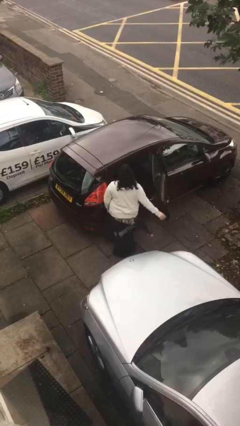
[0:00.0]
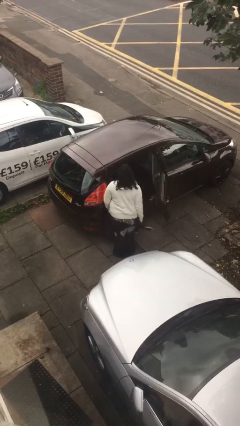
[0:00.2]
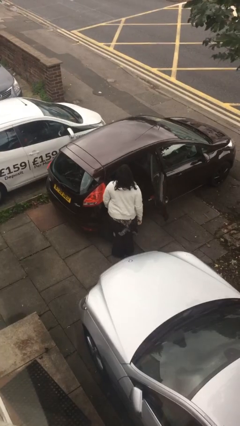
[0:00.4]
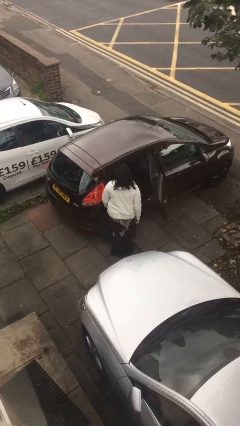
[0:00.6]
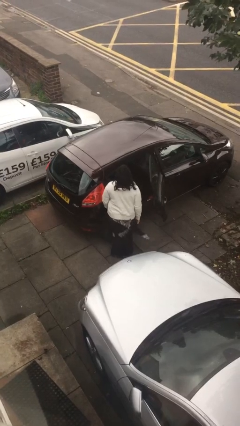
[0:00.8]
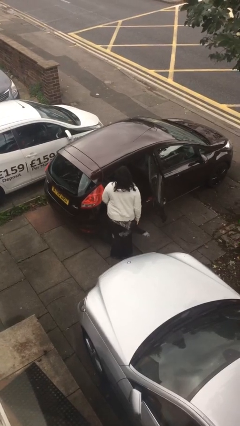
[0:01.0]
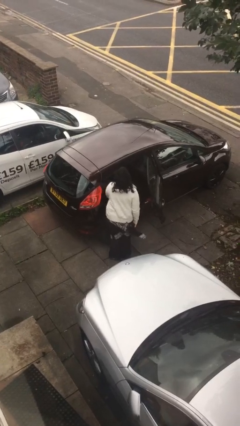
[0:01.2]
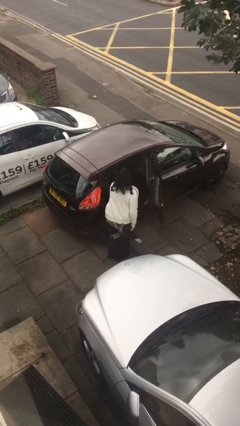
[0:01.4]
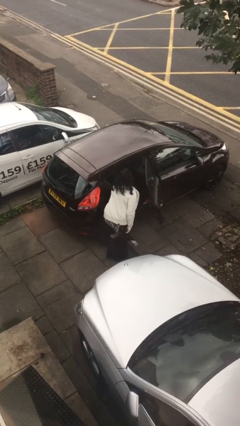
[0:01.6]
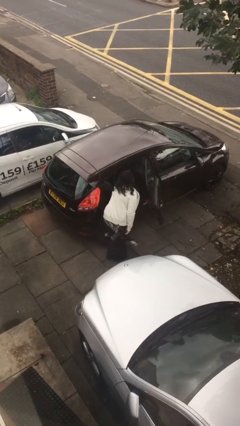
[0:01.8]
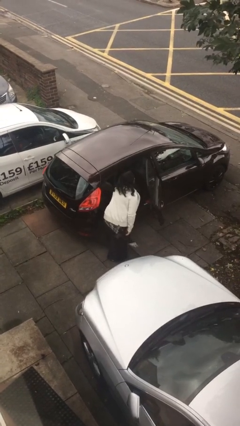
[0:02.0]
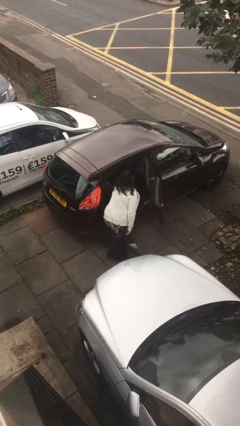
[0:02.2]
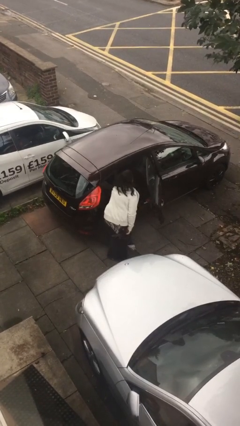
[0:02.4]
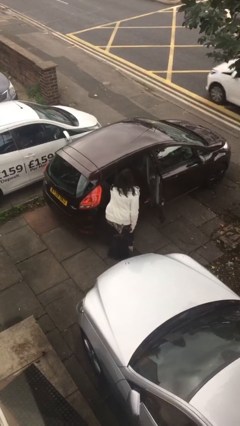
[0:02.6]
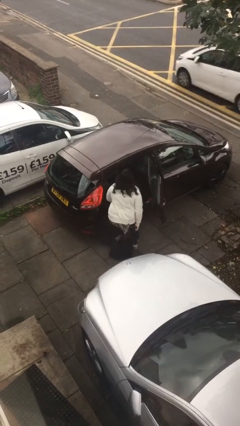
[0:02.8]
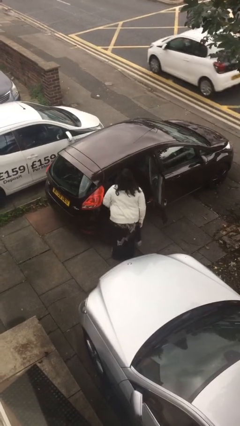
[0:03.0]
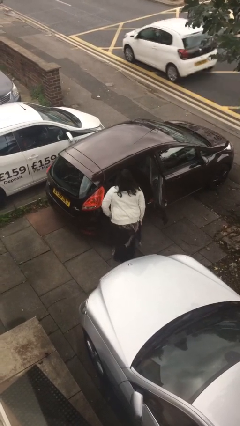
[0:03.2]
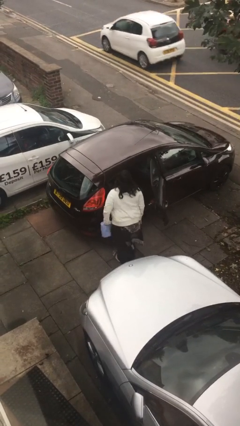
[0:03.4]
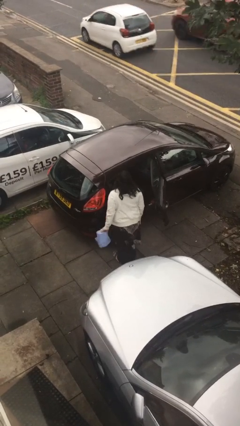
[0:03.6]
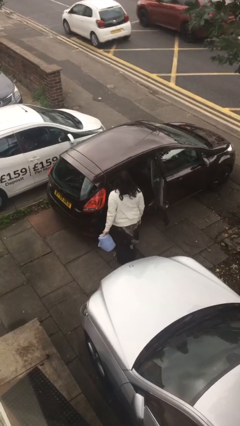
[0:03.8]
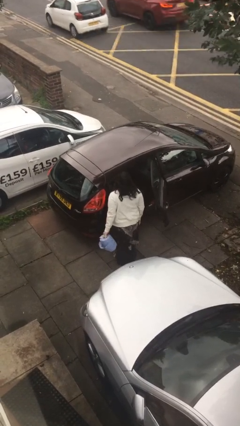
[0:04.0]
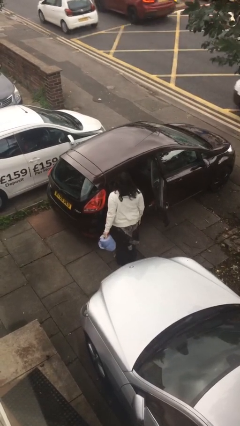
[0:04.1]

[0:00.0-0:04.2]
person unloads car

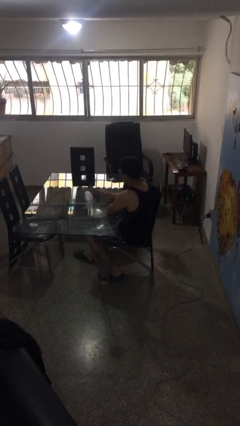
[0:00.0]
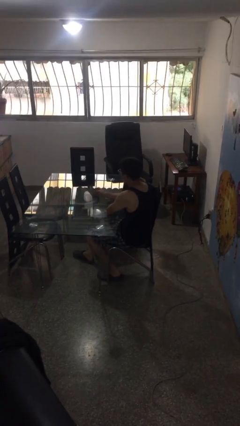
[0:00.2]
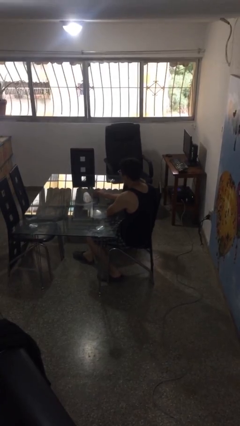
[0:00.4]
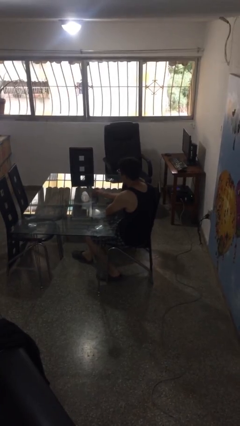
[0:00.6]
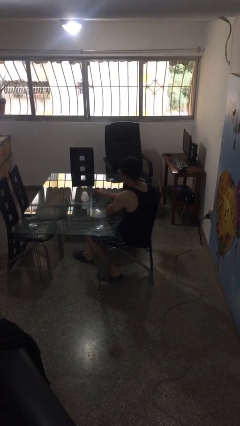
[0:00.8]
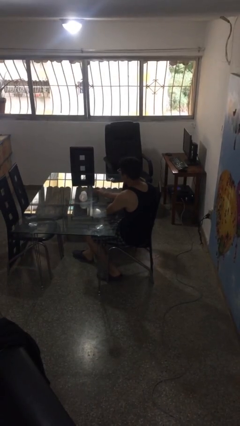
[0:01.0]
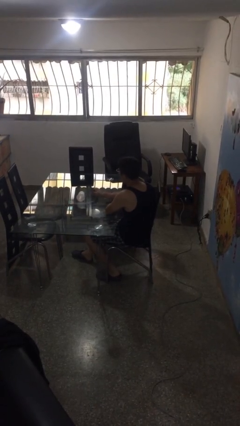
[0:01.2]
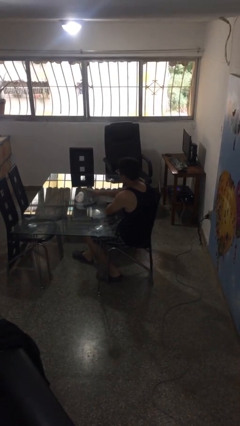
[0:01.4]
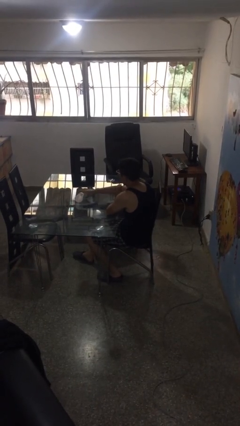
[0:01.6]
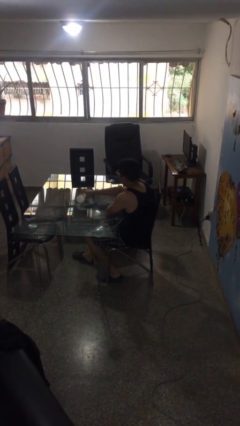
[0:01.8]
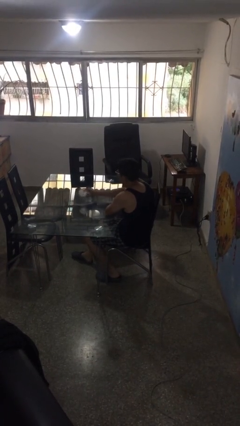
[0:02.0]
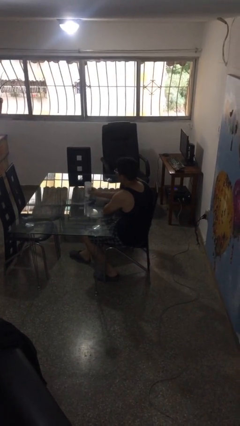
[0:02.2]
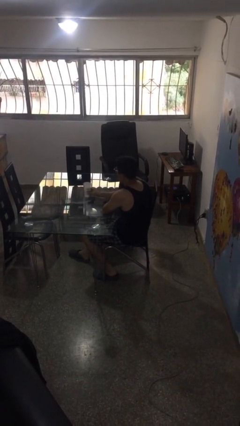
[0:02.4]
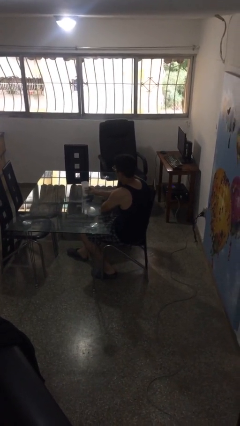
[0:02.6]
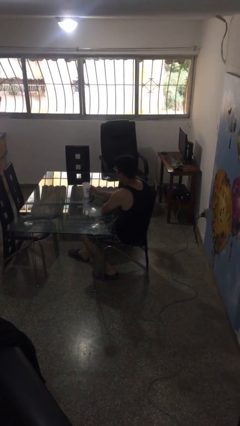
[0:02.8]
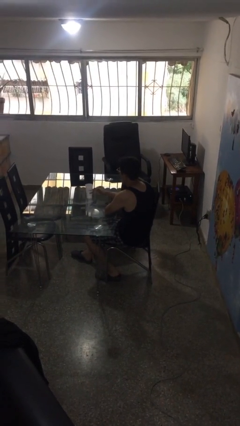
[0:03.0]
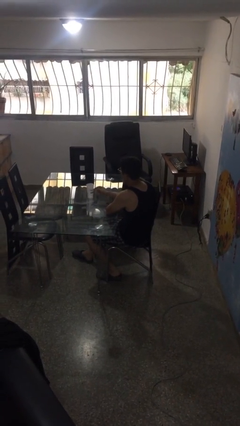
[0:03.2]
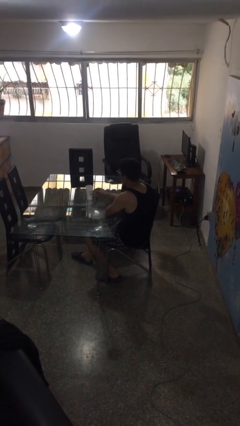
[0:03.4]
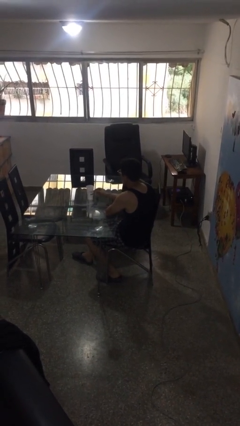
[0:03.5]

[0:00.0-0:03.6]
person sets upright glass

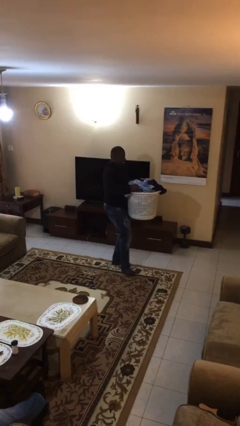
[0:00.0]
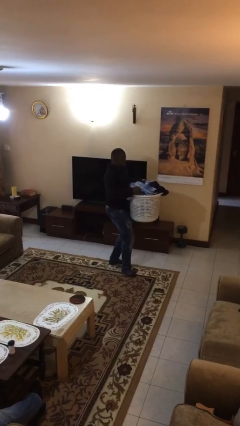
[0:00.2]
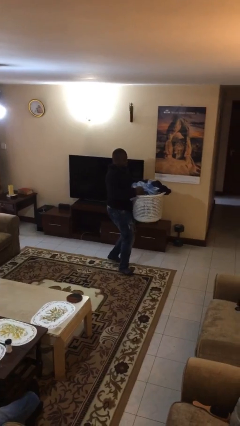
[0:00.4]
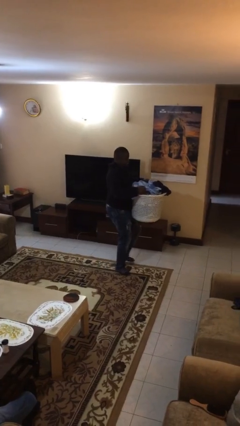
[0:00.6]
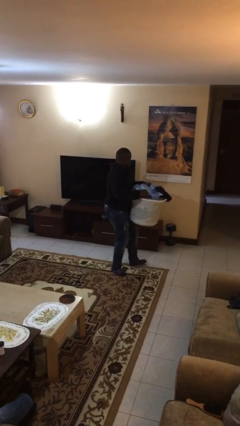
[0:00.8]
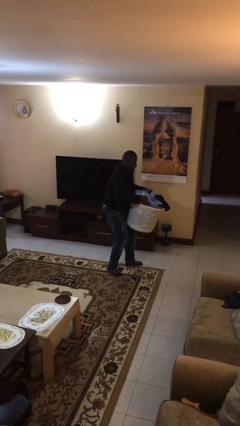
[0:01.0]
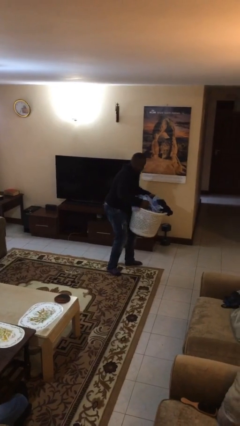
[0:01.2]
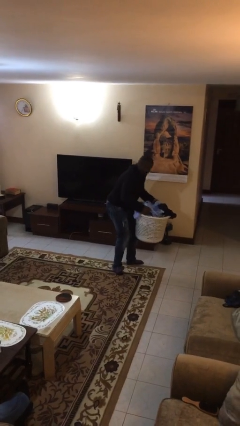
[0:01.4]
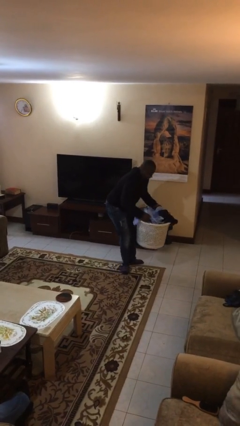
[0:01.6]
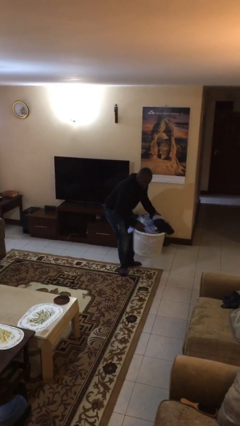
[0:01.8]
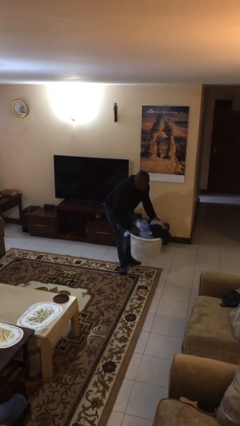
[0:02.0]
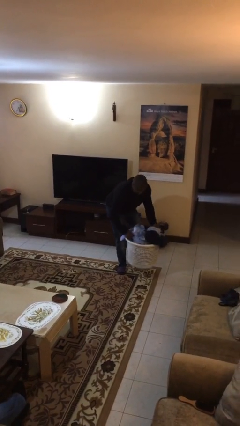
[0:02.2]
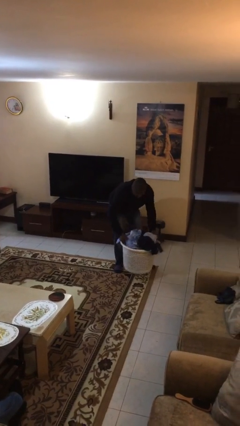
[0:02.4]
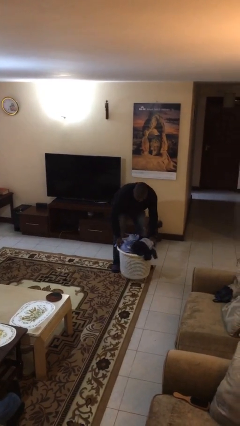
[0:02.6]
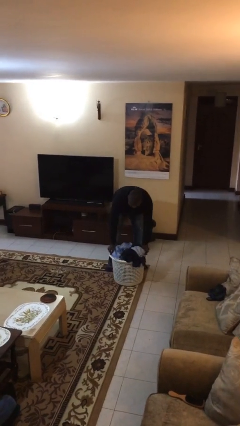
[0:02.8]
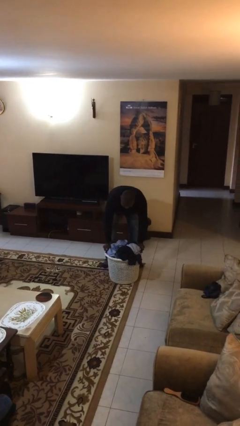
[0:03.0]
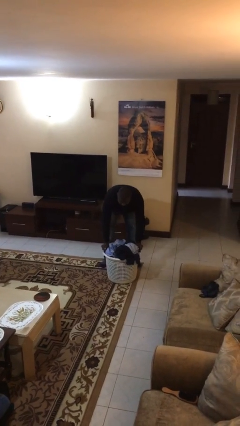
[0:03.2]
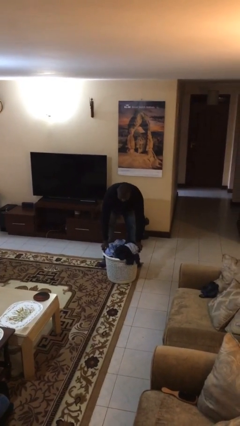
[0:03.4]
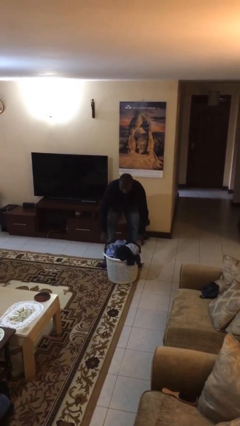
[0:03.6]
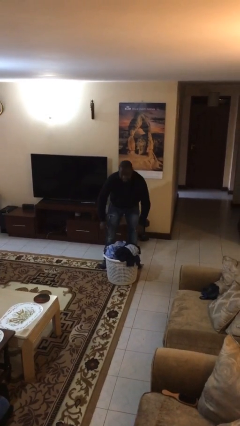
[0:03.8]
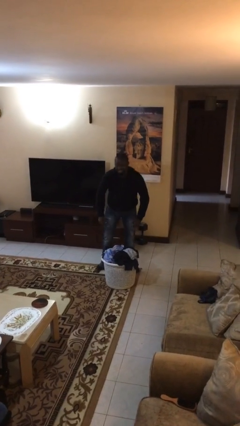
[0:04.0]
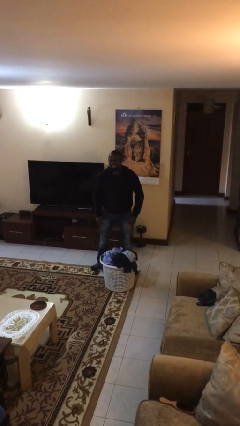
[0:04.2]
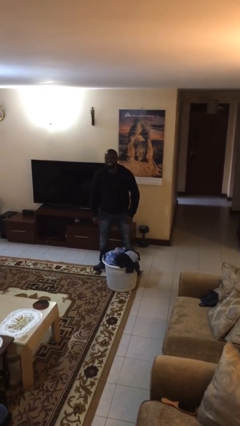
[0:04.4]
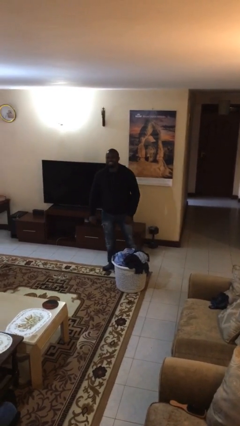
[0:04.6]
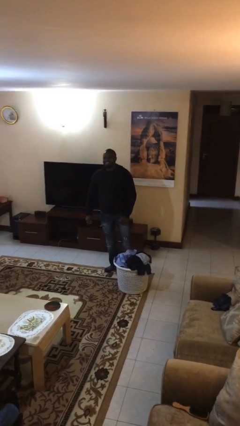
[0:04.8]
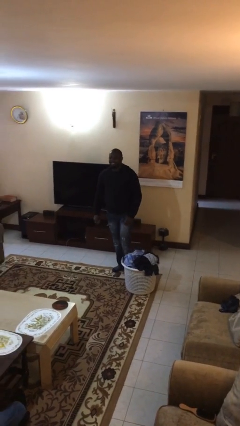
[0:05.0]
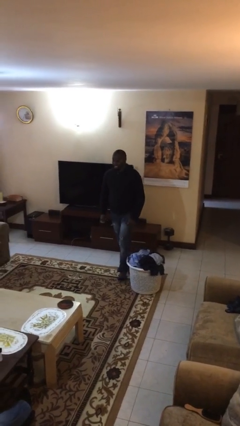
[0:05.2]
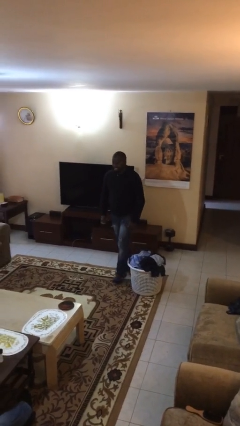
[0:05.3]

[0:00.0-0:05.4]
person puts down object on floor

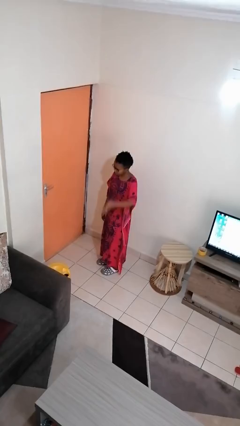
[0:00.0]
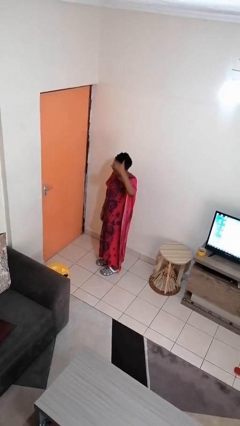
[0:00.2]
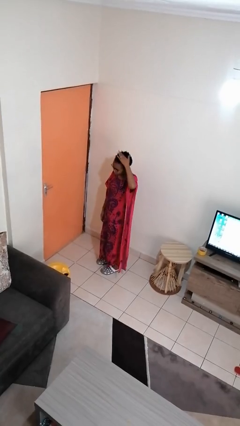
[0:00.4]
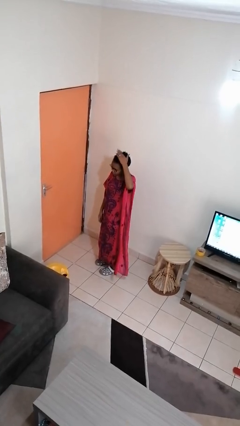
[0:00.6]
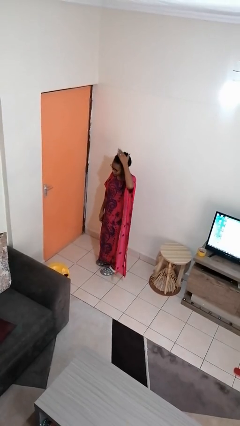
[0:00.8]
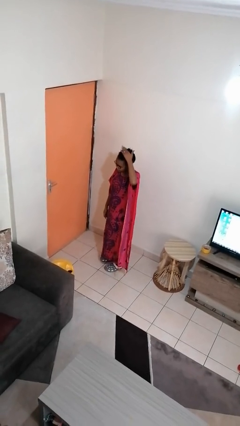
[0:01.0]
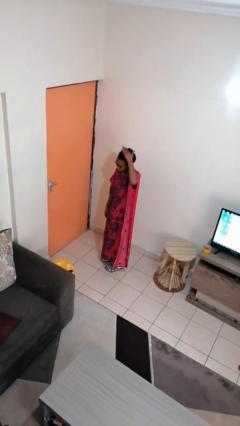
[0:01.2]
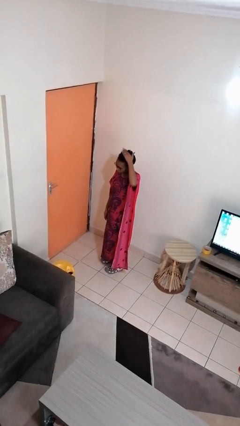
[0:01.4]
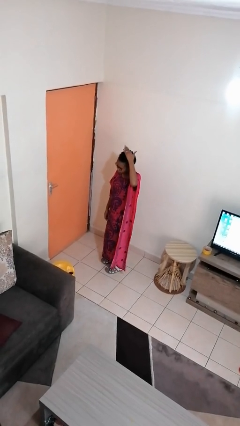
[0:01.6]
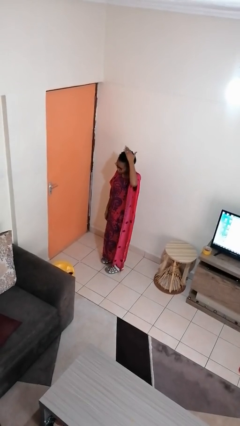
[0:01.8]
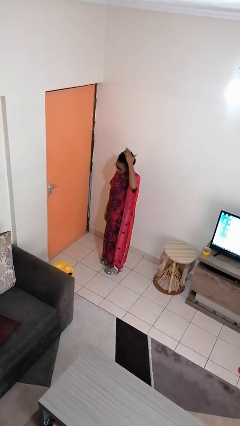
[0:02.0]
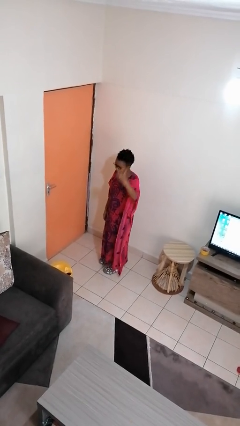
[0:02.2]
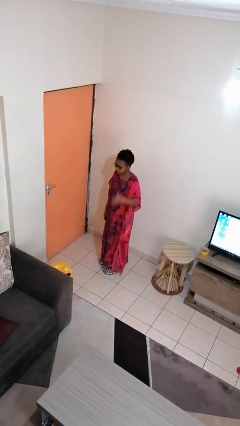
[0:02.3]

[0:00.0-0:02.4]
person pats head

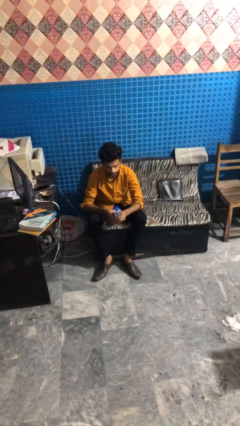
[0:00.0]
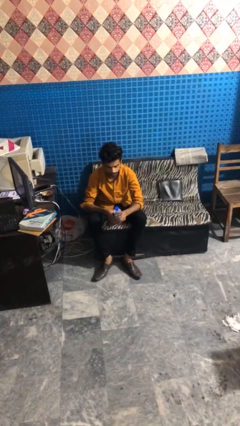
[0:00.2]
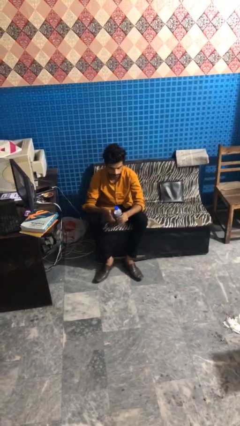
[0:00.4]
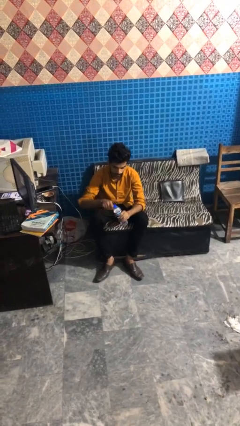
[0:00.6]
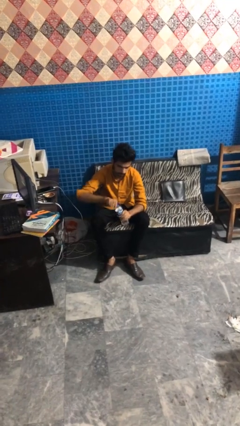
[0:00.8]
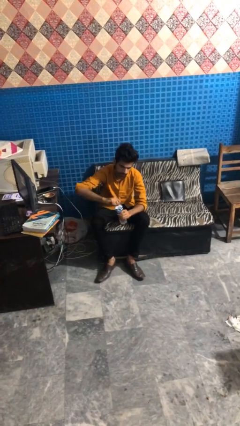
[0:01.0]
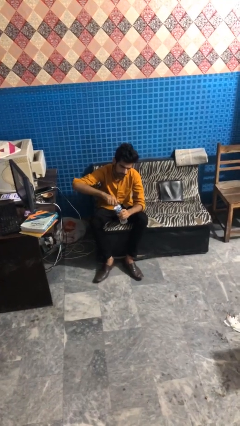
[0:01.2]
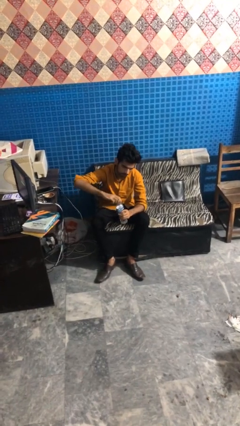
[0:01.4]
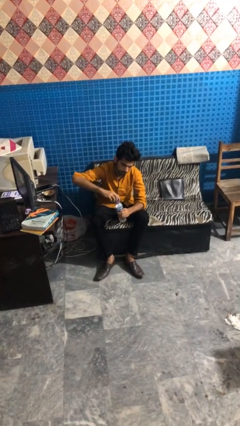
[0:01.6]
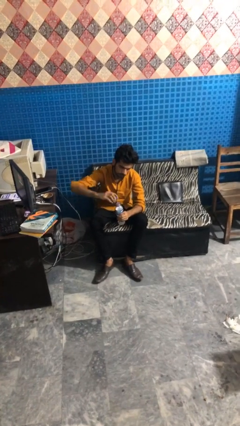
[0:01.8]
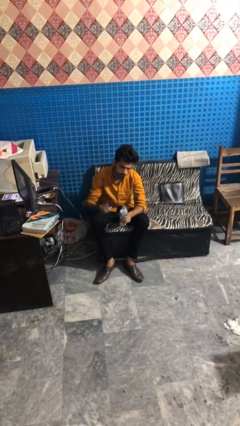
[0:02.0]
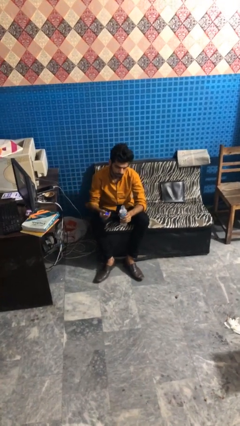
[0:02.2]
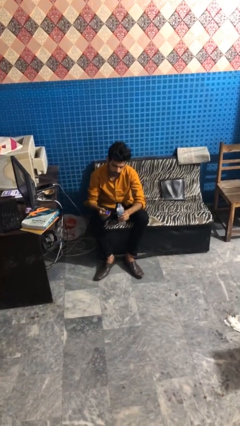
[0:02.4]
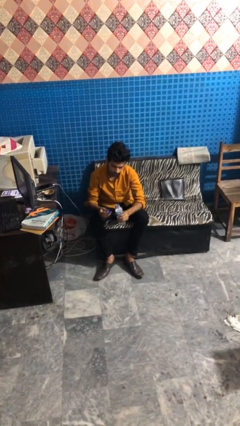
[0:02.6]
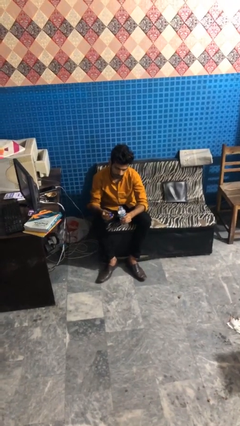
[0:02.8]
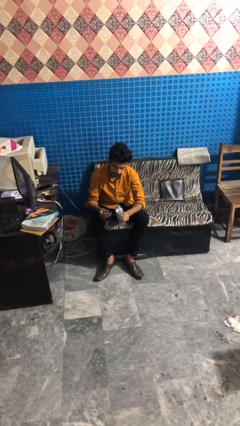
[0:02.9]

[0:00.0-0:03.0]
person unscrews lid from bottle
